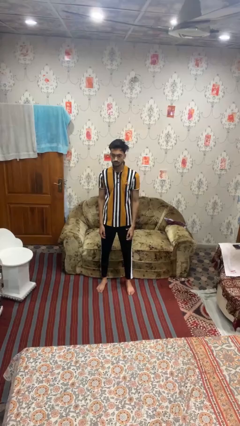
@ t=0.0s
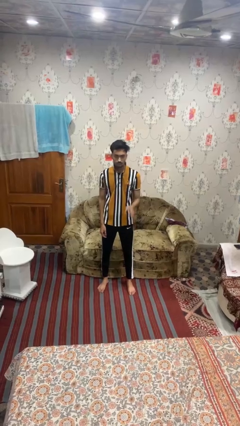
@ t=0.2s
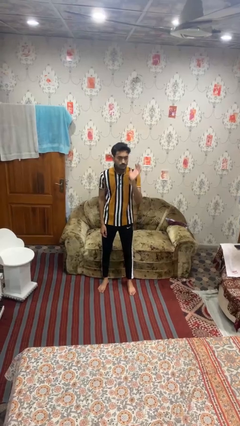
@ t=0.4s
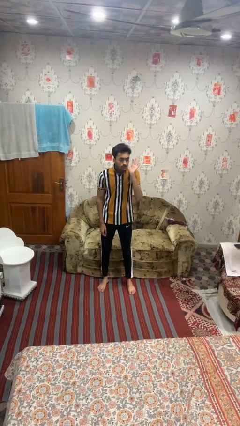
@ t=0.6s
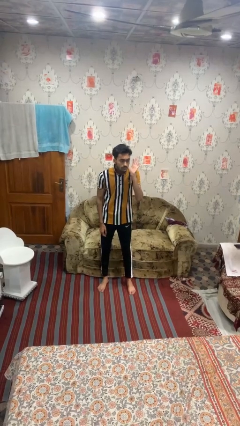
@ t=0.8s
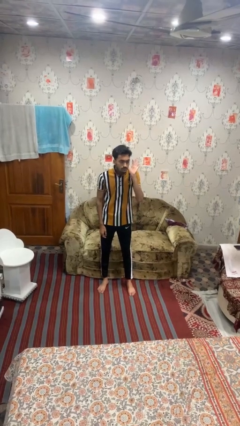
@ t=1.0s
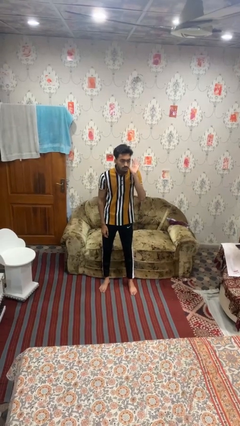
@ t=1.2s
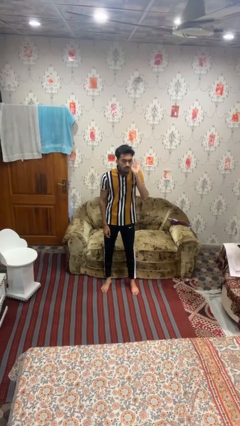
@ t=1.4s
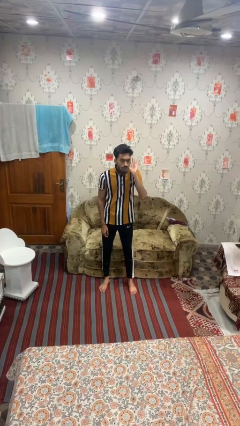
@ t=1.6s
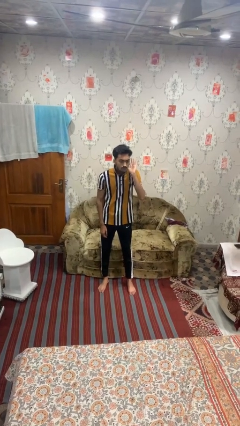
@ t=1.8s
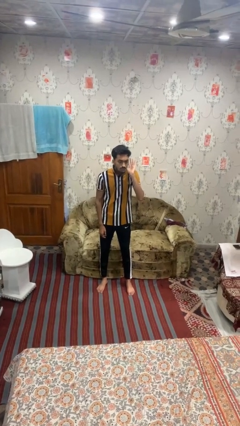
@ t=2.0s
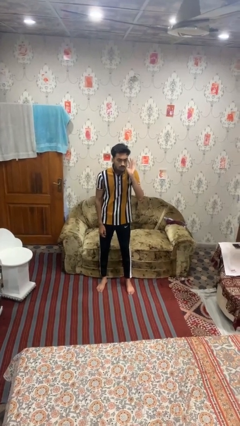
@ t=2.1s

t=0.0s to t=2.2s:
person gestures listen closely

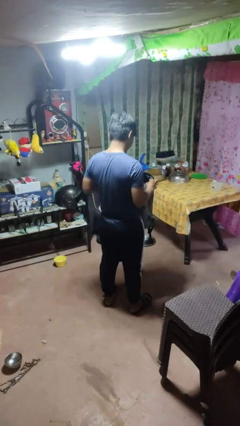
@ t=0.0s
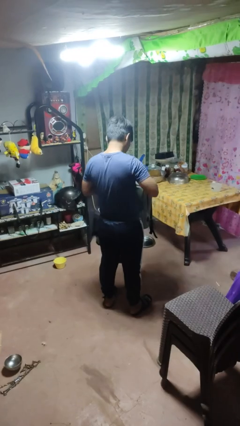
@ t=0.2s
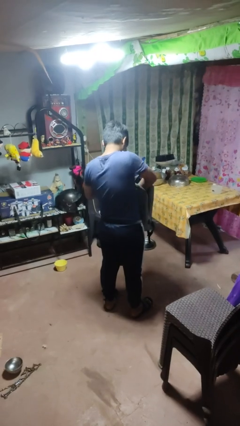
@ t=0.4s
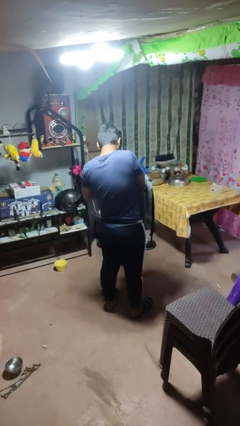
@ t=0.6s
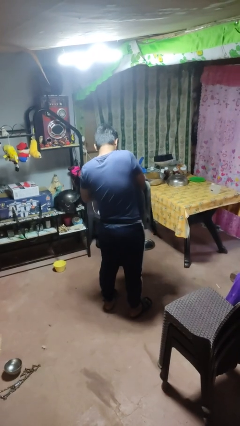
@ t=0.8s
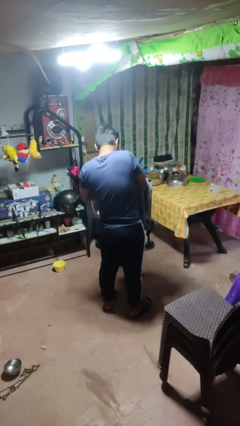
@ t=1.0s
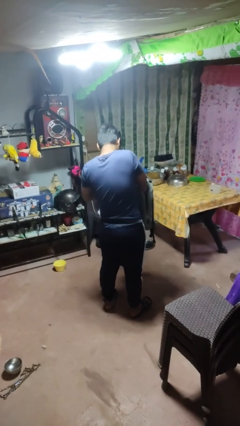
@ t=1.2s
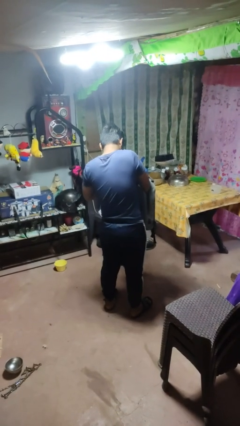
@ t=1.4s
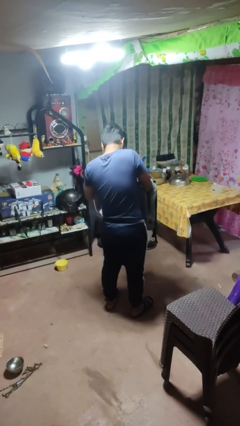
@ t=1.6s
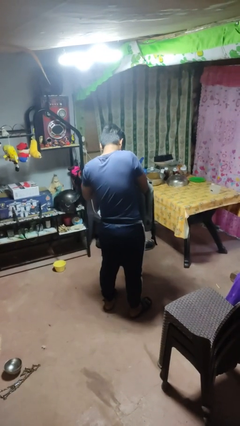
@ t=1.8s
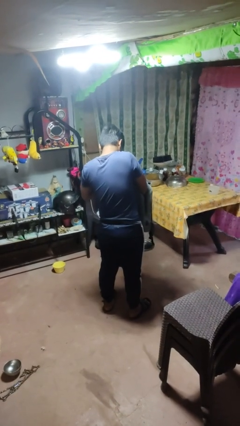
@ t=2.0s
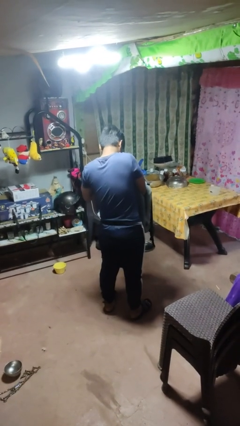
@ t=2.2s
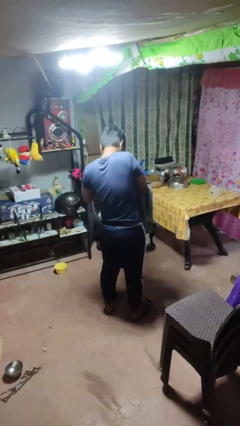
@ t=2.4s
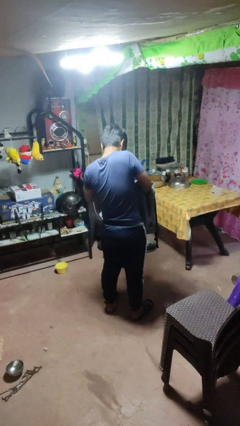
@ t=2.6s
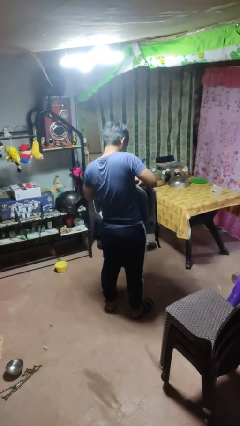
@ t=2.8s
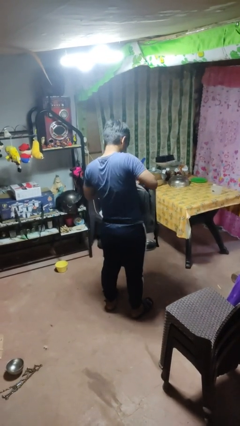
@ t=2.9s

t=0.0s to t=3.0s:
person searches in bag

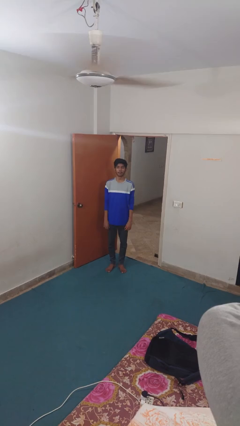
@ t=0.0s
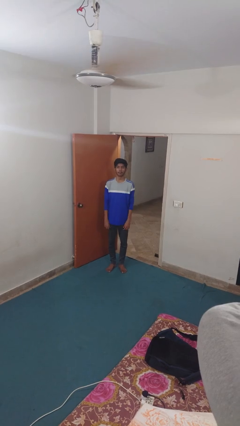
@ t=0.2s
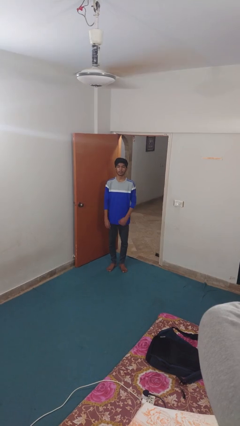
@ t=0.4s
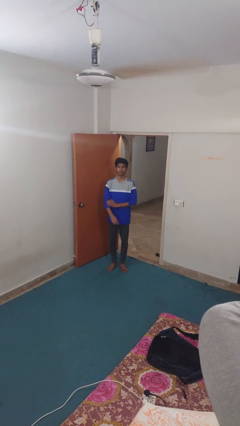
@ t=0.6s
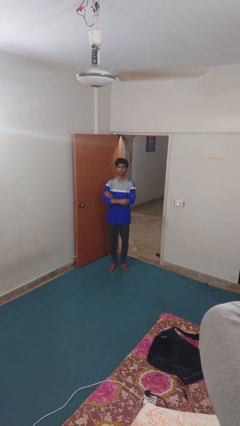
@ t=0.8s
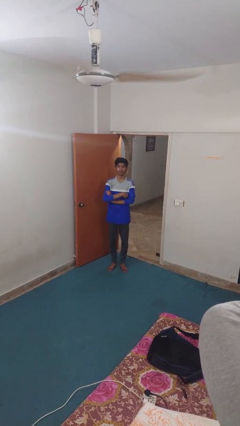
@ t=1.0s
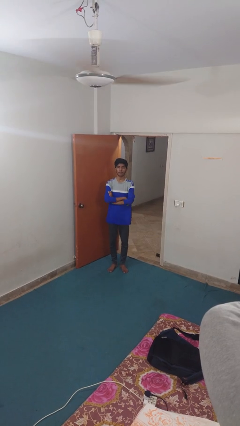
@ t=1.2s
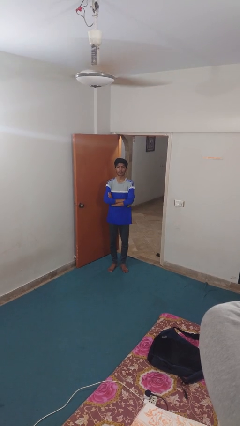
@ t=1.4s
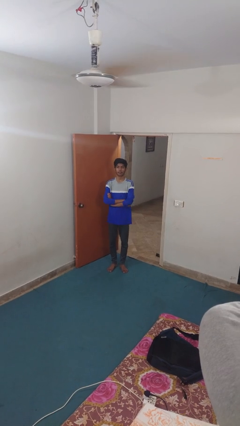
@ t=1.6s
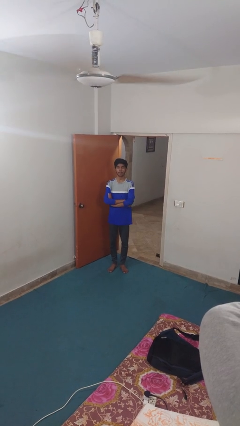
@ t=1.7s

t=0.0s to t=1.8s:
person crosses arms

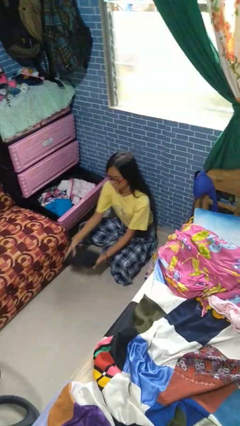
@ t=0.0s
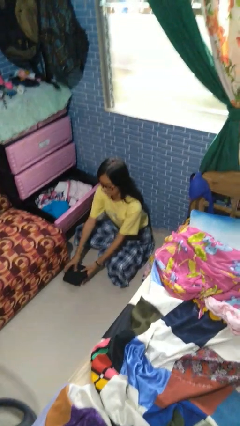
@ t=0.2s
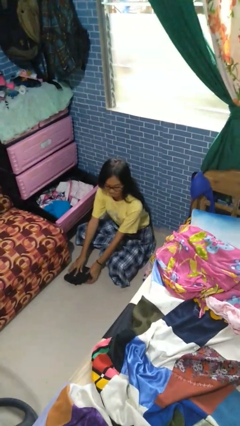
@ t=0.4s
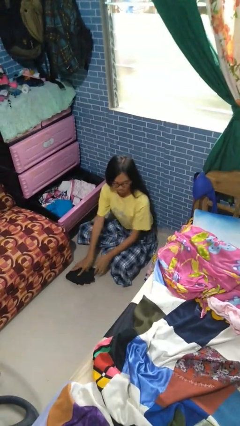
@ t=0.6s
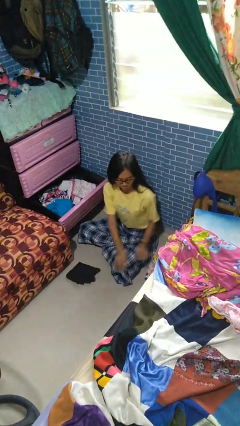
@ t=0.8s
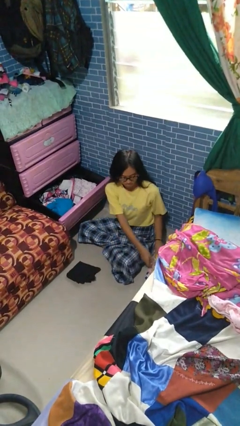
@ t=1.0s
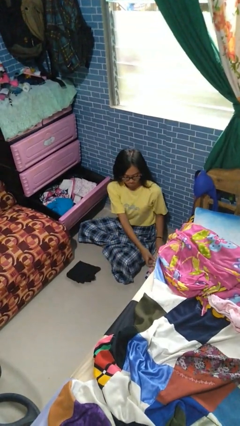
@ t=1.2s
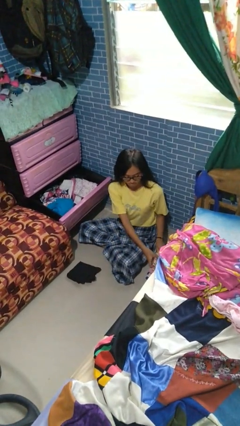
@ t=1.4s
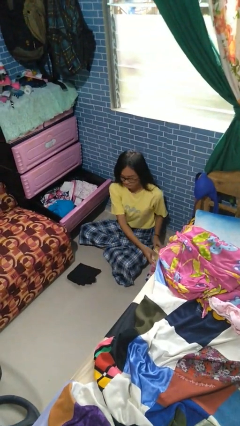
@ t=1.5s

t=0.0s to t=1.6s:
person takes clothes from dresser

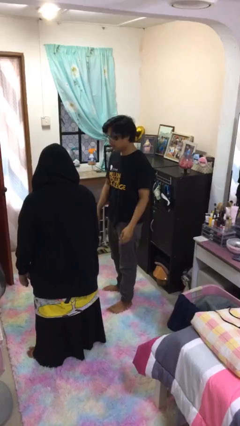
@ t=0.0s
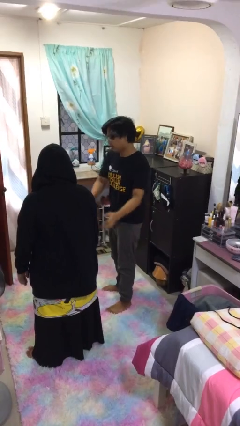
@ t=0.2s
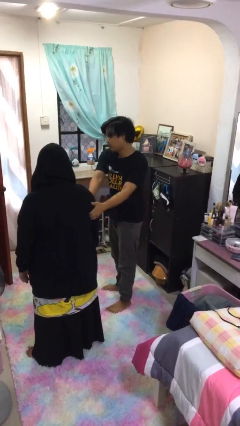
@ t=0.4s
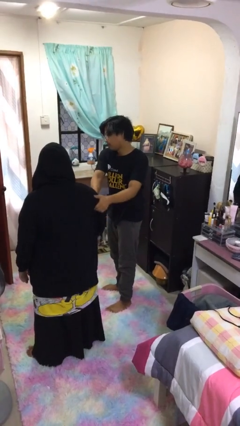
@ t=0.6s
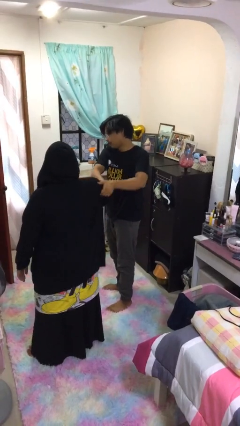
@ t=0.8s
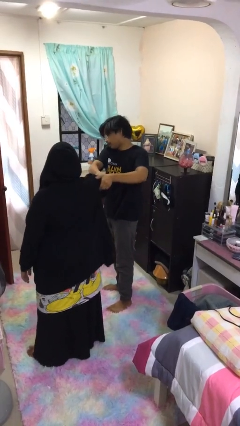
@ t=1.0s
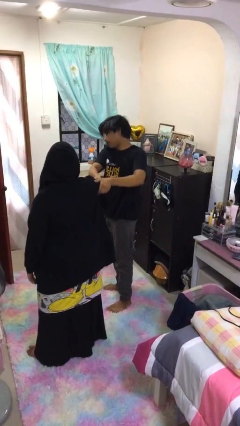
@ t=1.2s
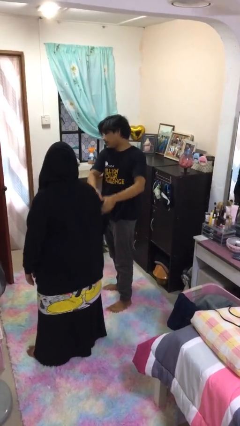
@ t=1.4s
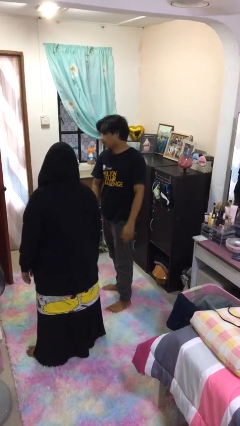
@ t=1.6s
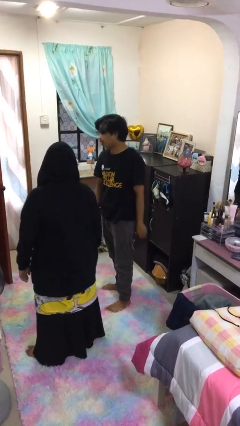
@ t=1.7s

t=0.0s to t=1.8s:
person grabs person by bicep

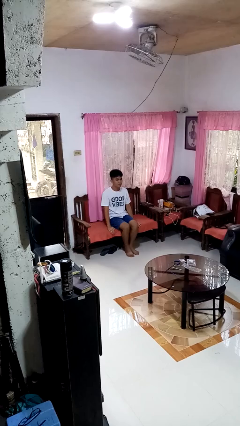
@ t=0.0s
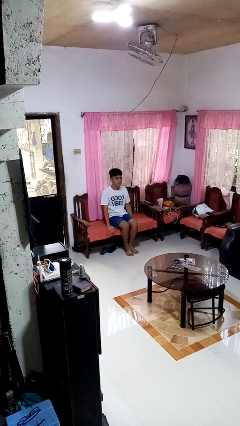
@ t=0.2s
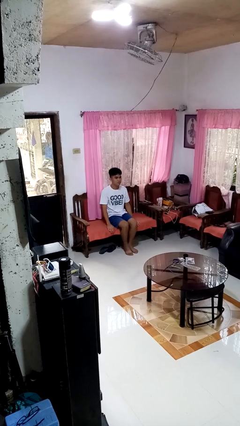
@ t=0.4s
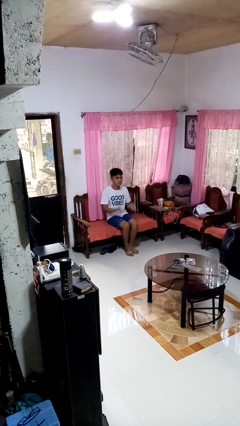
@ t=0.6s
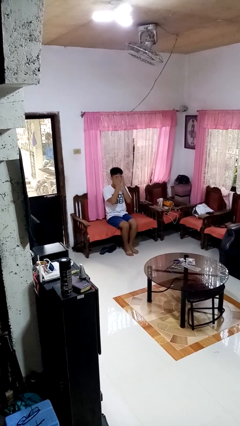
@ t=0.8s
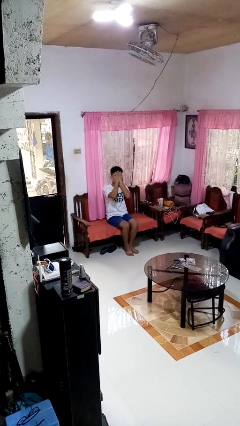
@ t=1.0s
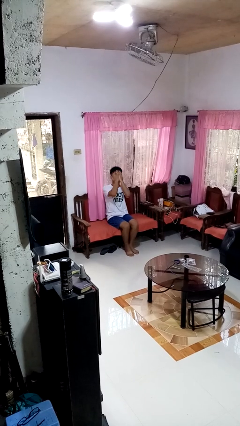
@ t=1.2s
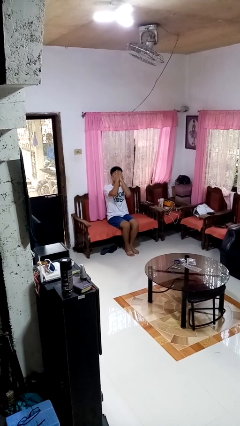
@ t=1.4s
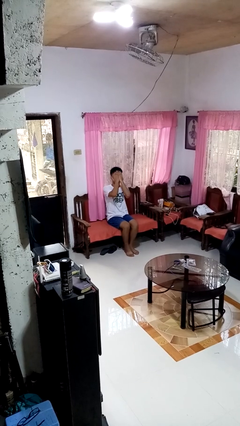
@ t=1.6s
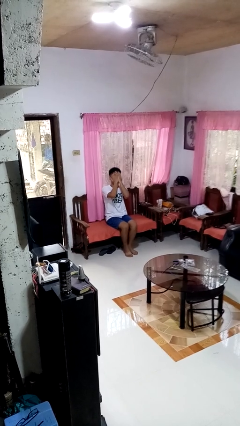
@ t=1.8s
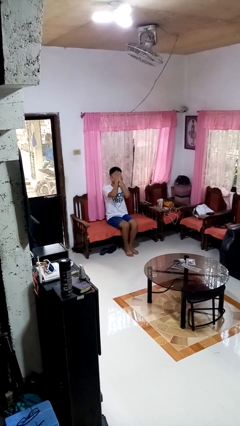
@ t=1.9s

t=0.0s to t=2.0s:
person covers face with hands

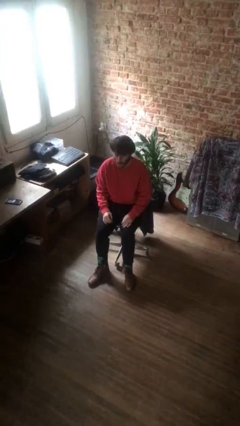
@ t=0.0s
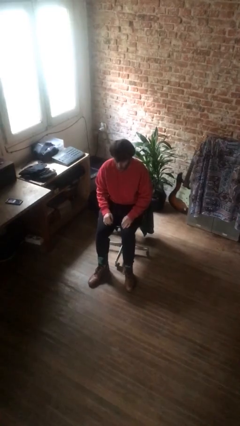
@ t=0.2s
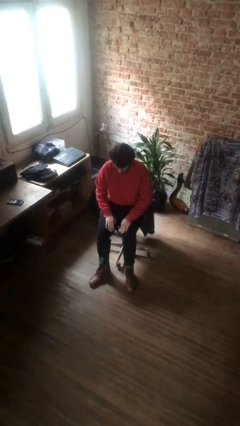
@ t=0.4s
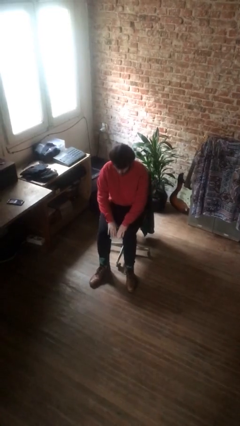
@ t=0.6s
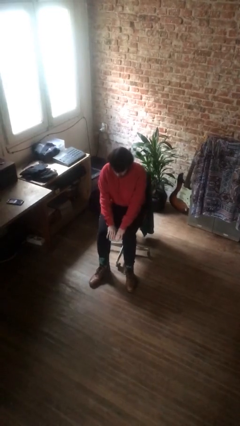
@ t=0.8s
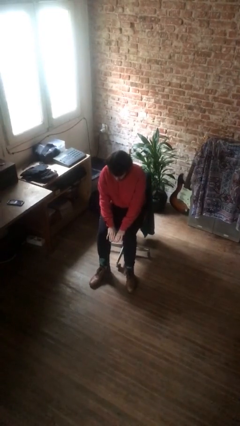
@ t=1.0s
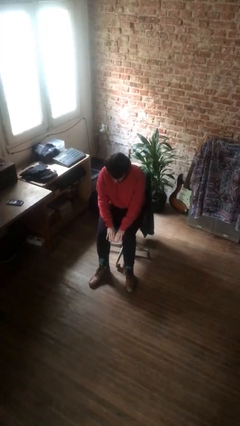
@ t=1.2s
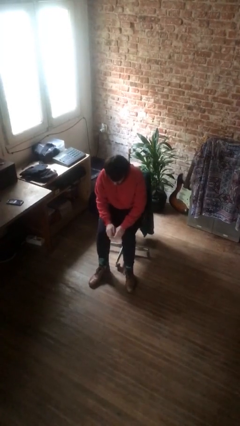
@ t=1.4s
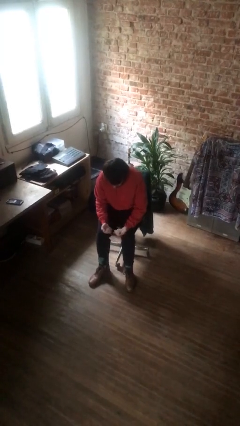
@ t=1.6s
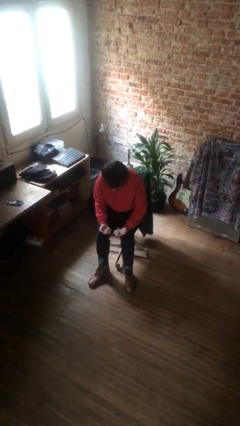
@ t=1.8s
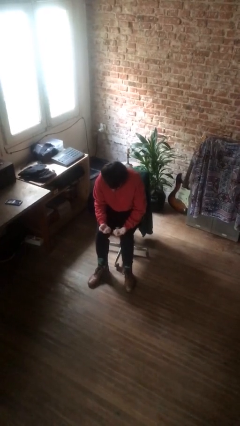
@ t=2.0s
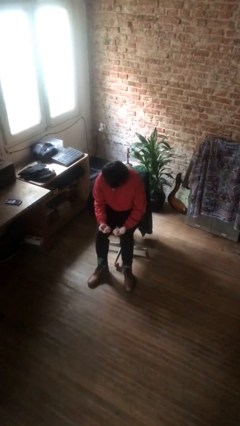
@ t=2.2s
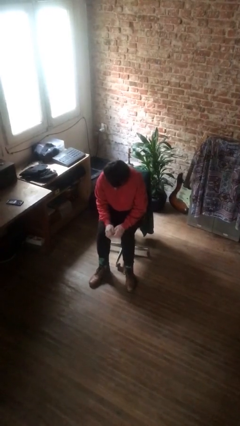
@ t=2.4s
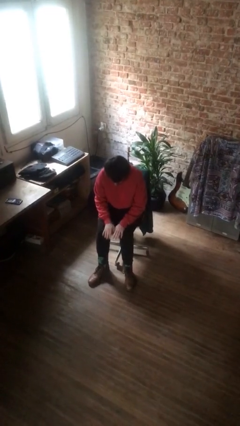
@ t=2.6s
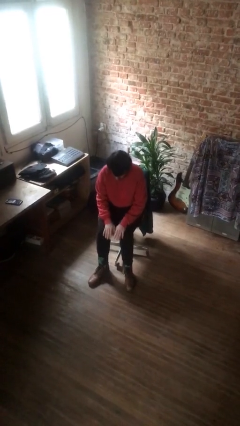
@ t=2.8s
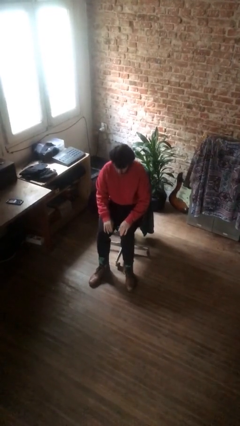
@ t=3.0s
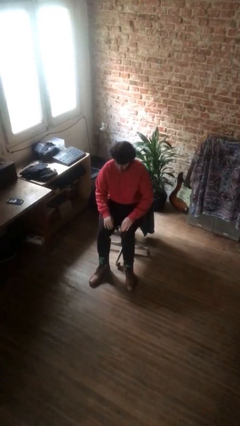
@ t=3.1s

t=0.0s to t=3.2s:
person looks at hands in lap

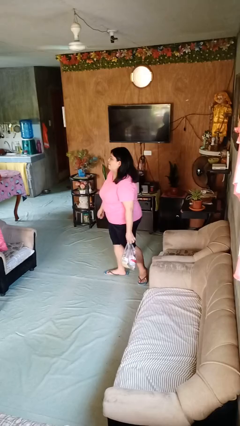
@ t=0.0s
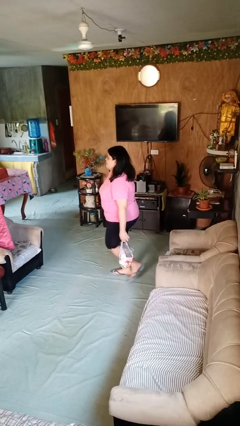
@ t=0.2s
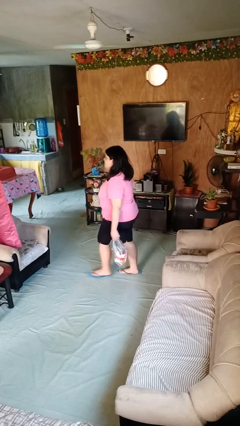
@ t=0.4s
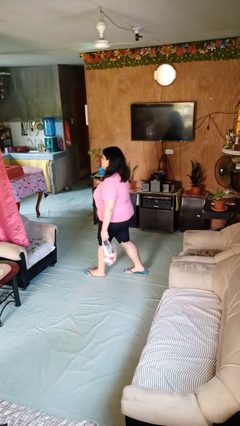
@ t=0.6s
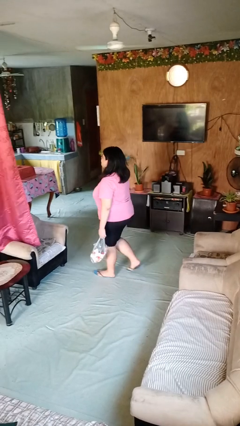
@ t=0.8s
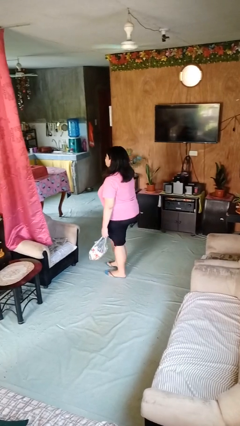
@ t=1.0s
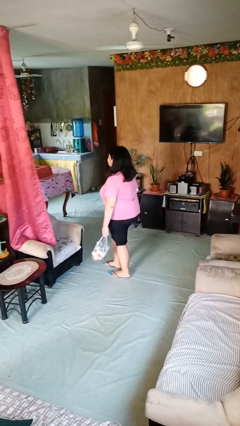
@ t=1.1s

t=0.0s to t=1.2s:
person carries groceries
